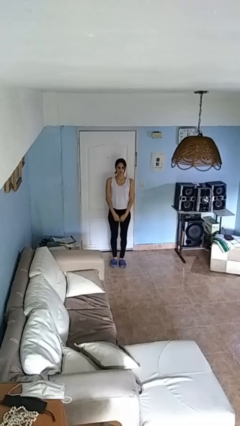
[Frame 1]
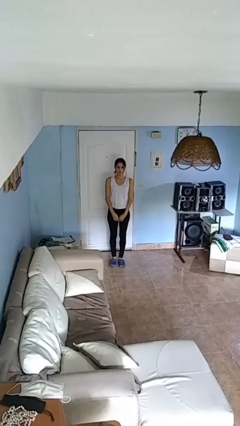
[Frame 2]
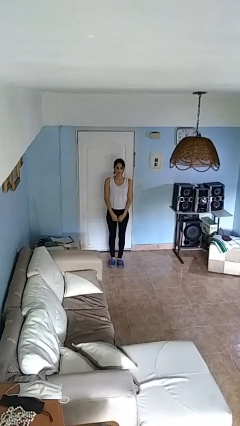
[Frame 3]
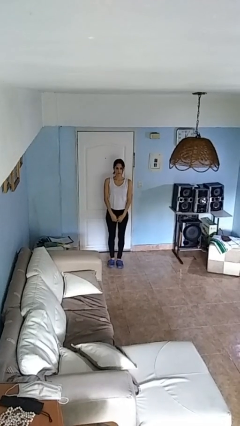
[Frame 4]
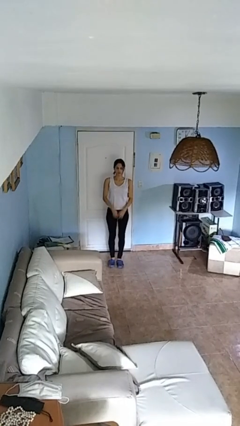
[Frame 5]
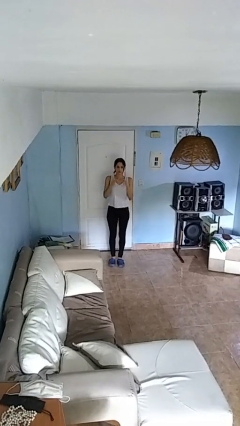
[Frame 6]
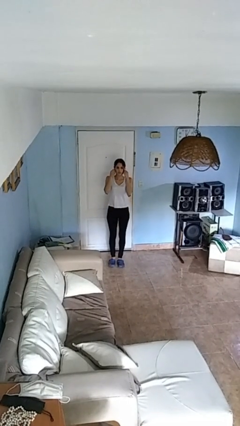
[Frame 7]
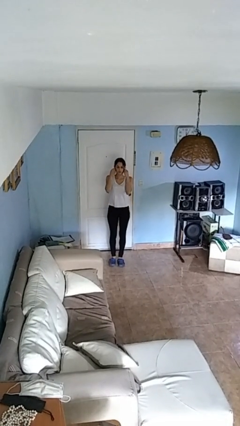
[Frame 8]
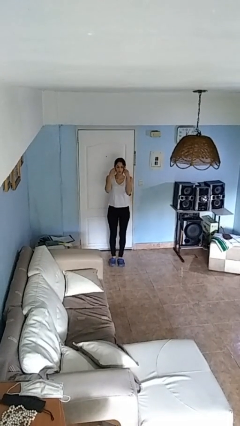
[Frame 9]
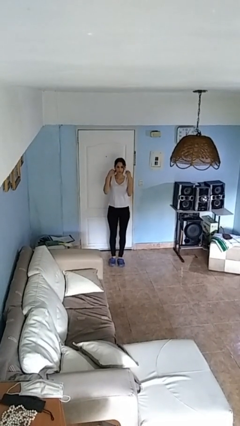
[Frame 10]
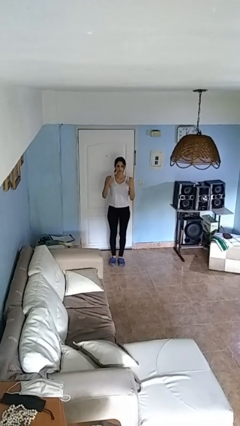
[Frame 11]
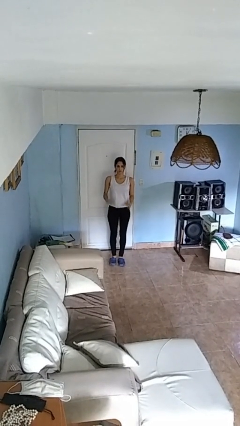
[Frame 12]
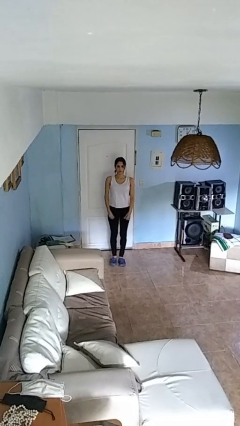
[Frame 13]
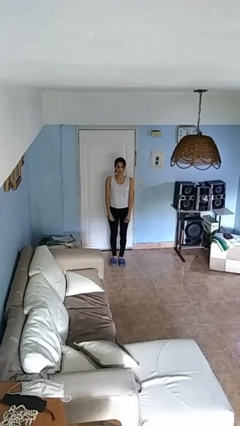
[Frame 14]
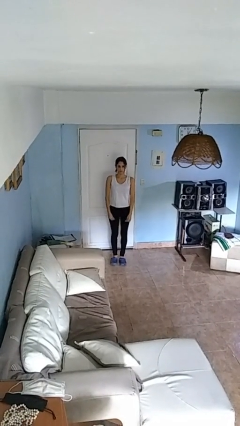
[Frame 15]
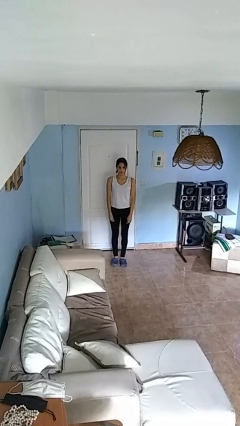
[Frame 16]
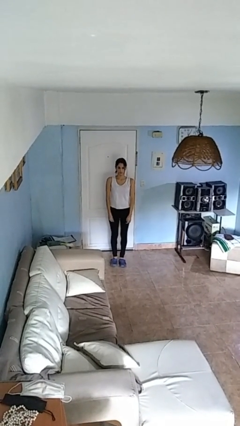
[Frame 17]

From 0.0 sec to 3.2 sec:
person takes off earrings

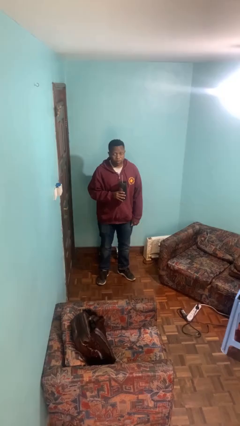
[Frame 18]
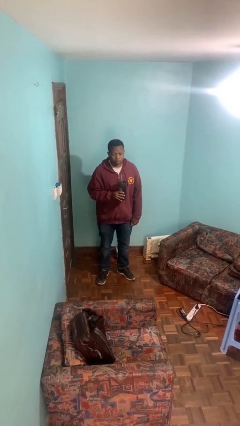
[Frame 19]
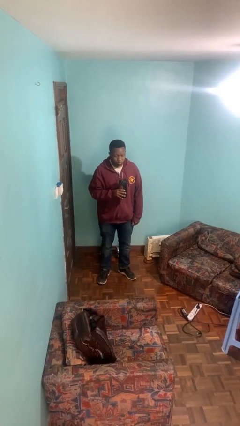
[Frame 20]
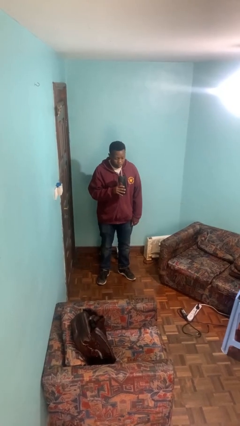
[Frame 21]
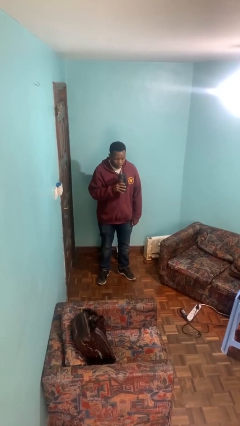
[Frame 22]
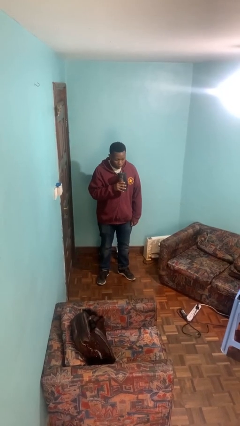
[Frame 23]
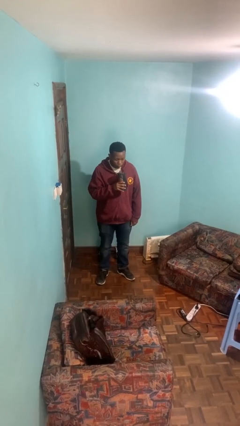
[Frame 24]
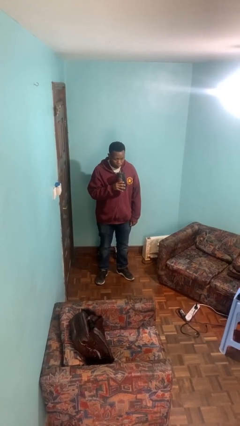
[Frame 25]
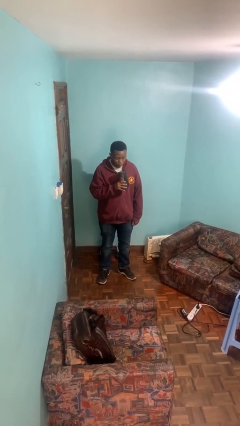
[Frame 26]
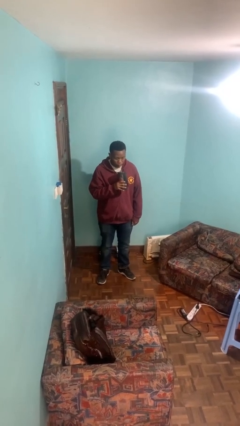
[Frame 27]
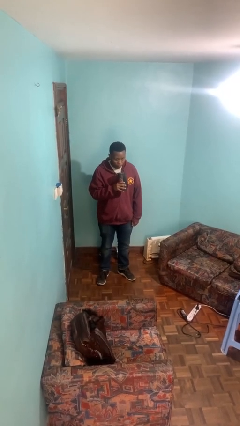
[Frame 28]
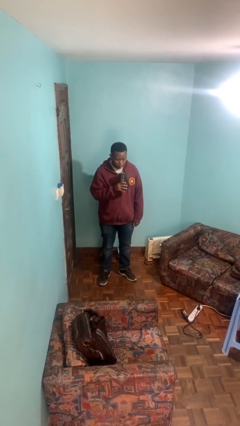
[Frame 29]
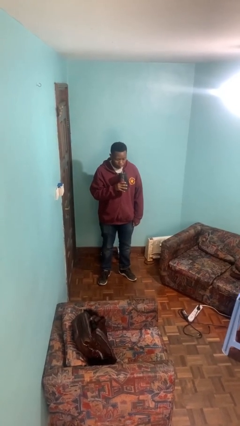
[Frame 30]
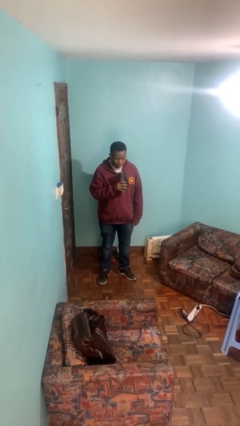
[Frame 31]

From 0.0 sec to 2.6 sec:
person drinks from straw

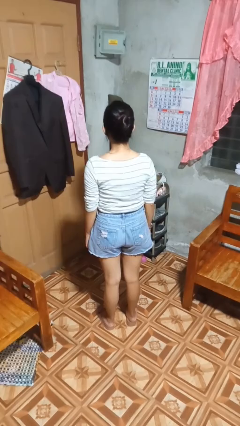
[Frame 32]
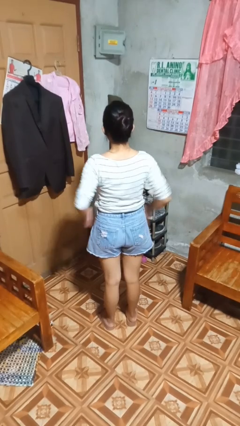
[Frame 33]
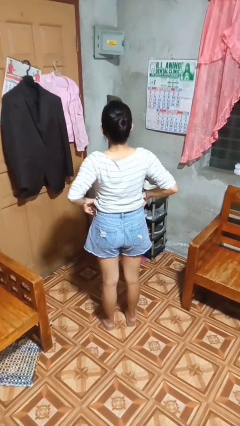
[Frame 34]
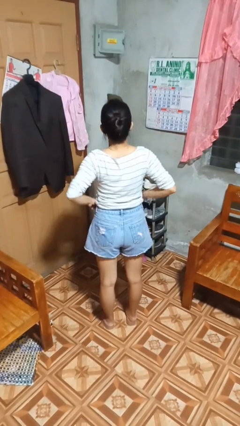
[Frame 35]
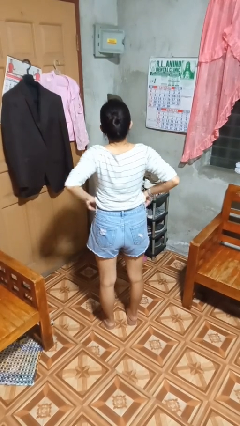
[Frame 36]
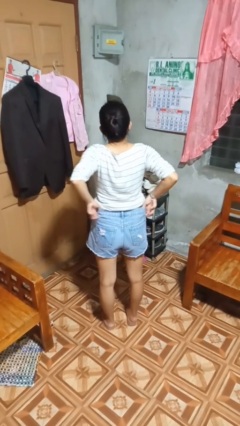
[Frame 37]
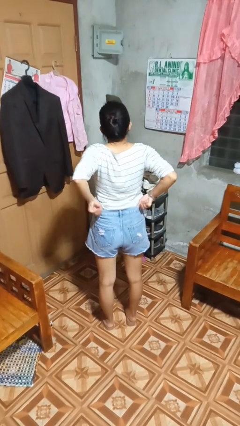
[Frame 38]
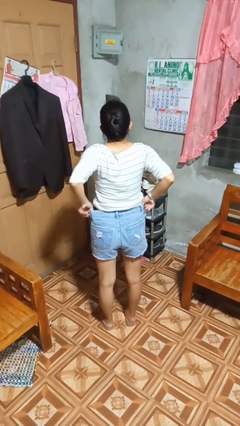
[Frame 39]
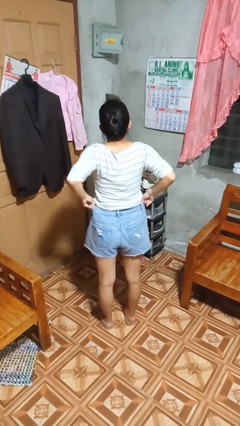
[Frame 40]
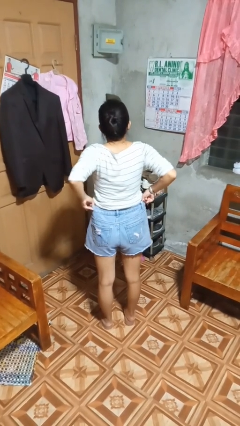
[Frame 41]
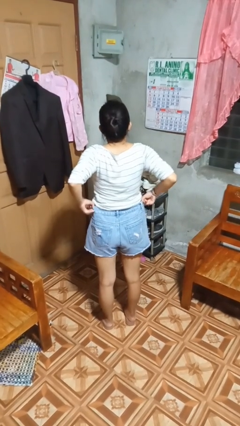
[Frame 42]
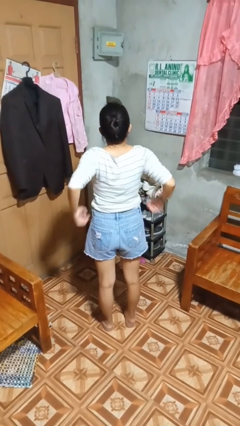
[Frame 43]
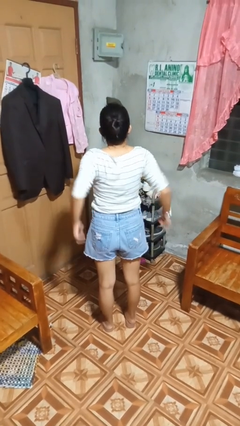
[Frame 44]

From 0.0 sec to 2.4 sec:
person hikes up pants

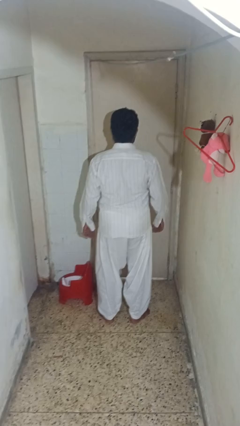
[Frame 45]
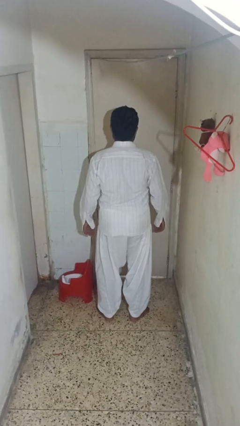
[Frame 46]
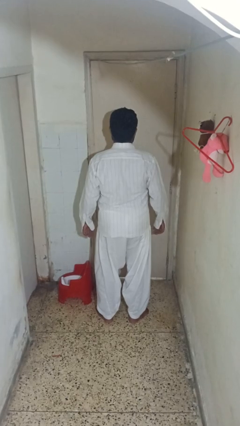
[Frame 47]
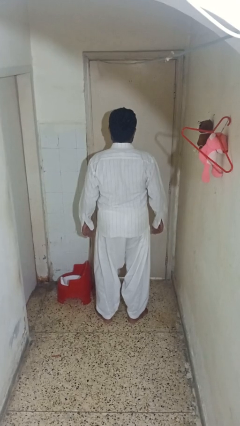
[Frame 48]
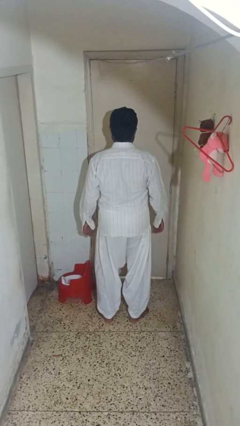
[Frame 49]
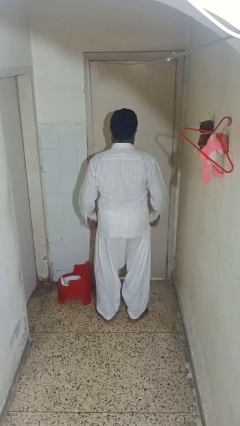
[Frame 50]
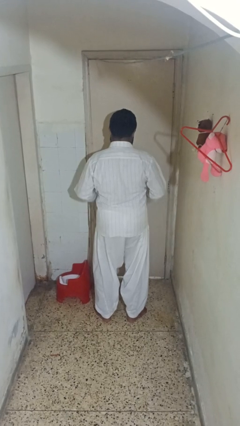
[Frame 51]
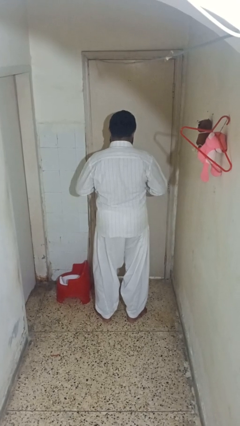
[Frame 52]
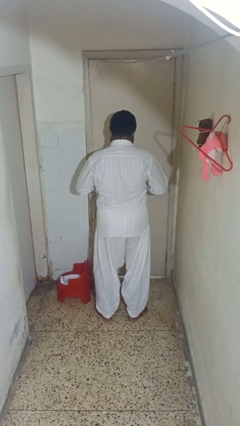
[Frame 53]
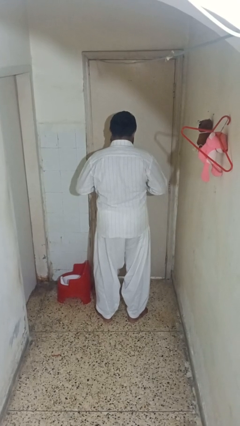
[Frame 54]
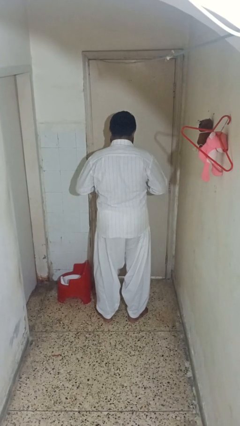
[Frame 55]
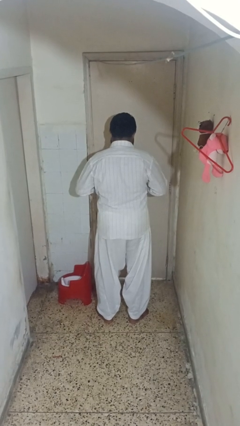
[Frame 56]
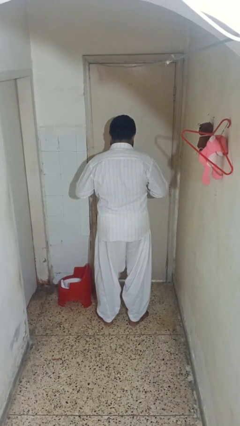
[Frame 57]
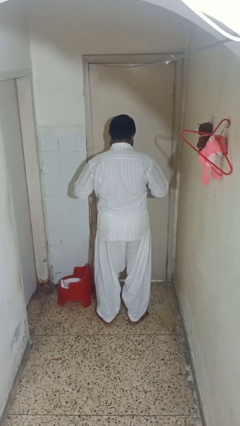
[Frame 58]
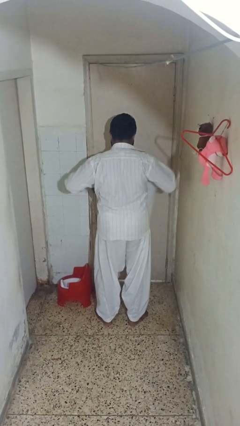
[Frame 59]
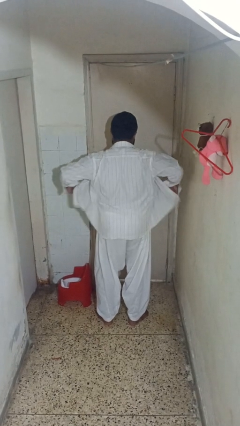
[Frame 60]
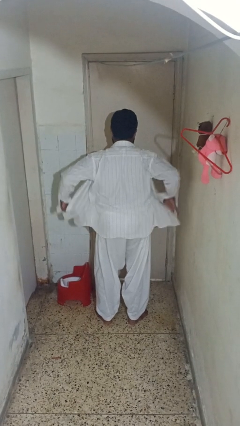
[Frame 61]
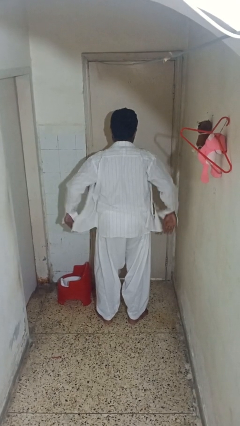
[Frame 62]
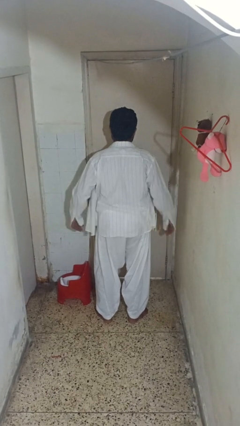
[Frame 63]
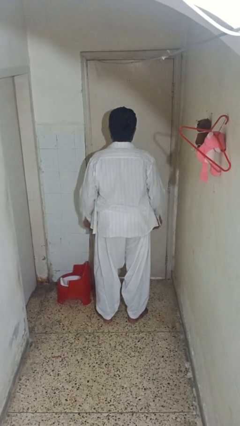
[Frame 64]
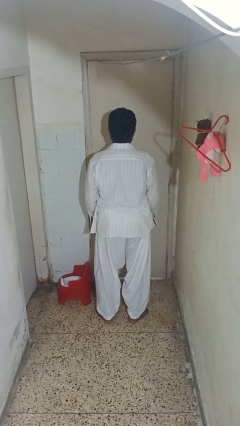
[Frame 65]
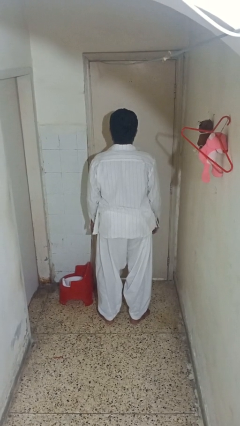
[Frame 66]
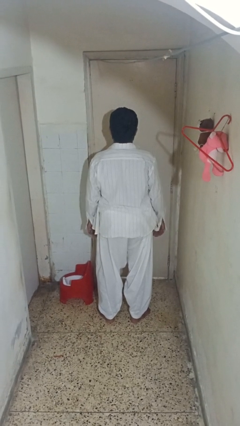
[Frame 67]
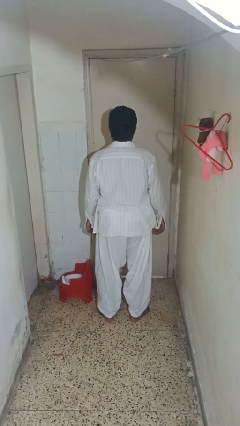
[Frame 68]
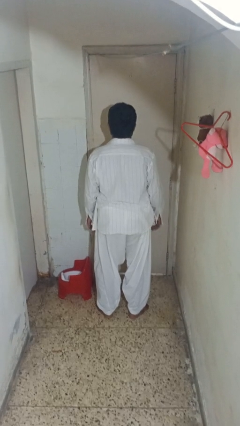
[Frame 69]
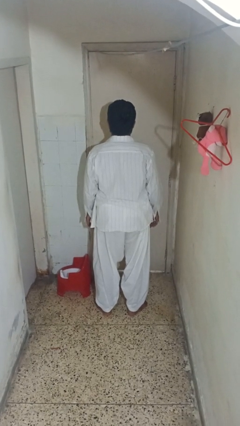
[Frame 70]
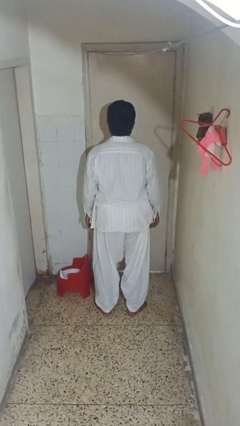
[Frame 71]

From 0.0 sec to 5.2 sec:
person unbuttons shirt

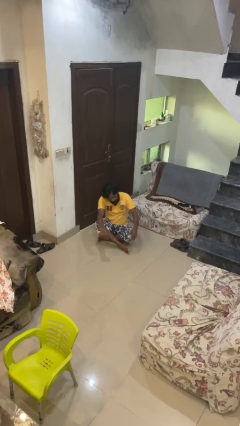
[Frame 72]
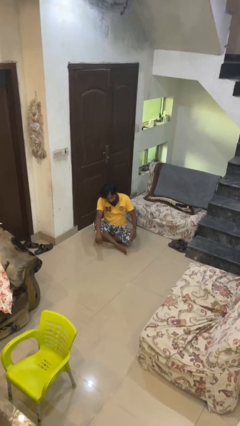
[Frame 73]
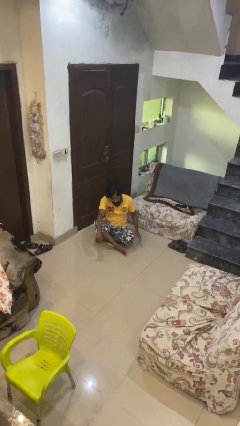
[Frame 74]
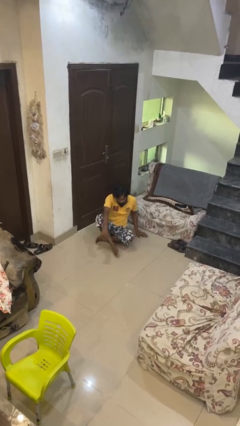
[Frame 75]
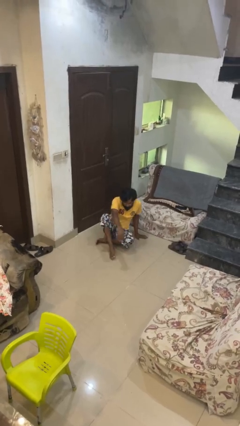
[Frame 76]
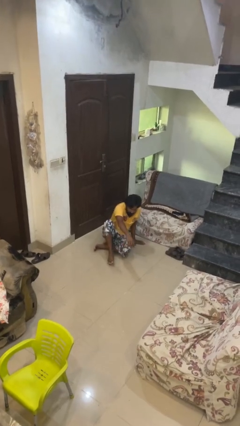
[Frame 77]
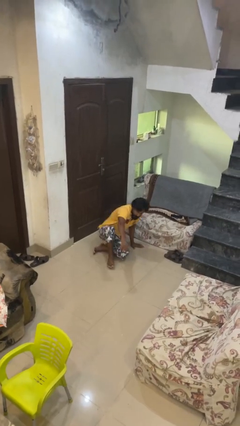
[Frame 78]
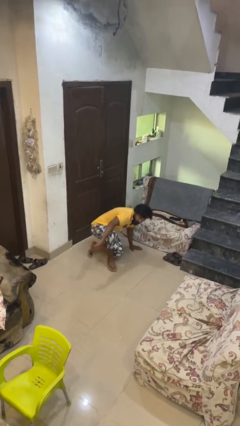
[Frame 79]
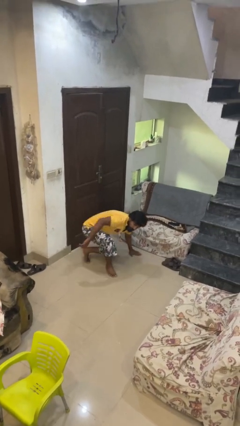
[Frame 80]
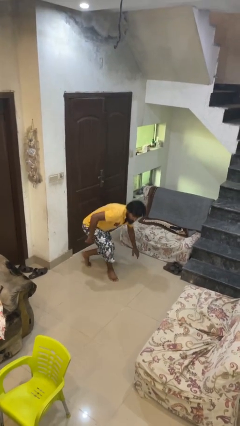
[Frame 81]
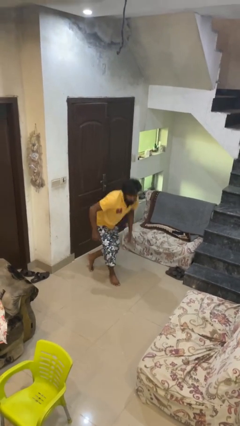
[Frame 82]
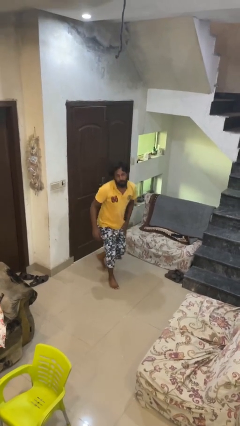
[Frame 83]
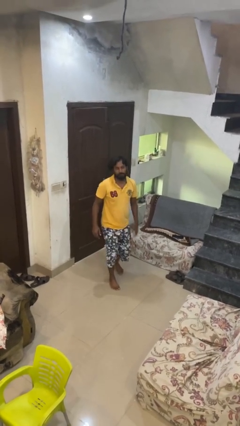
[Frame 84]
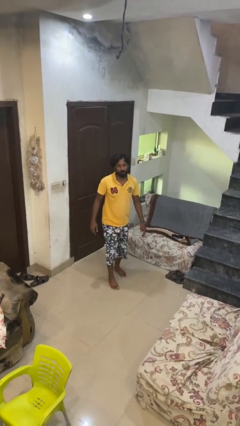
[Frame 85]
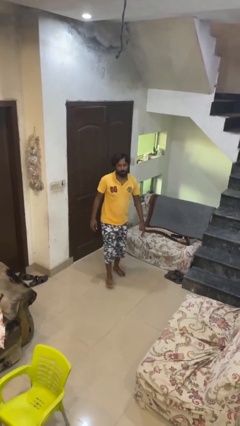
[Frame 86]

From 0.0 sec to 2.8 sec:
person stands up from floor

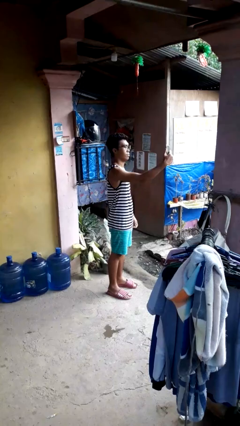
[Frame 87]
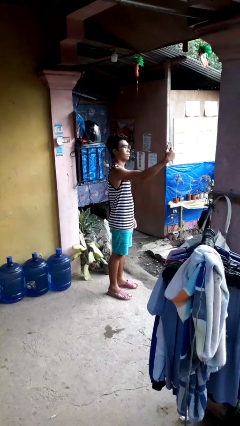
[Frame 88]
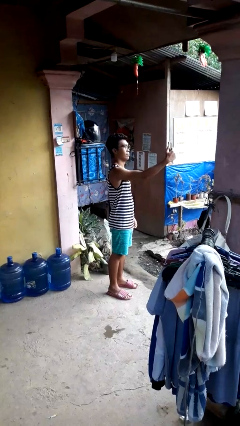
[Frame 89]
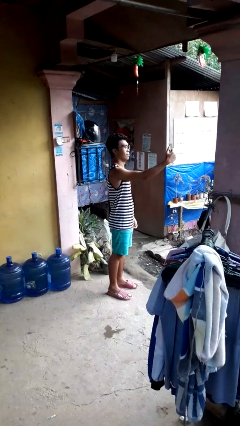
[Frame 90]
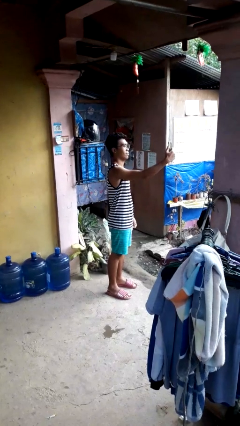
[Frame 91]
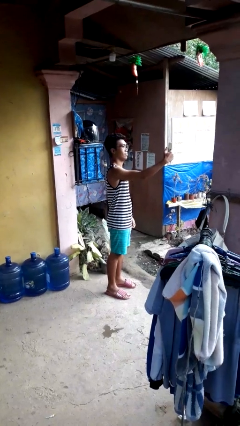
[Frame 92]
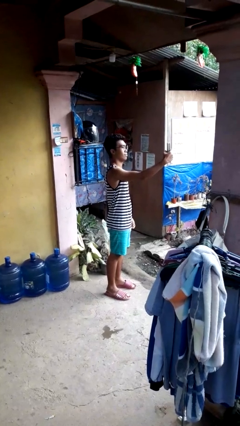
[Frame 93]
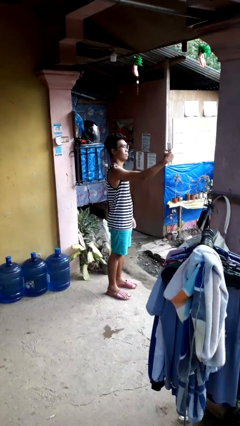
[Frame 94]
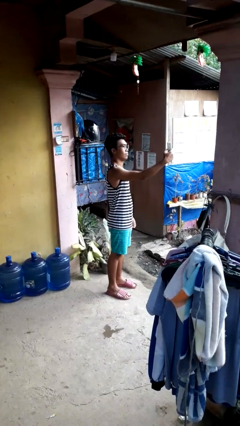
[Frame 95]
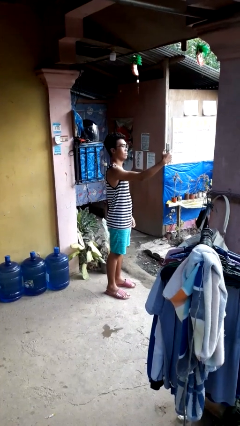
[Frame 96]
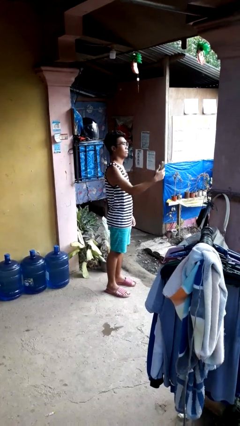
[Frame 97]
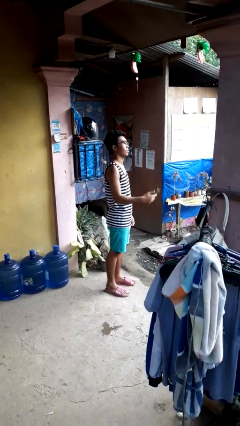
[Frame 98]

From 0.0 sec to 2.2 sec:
person takes selfie
